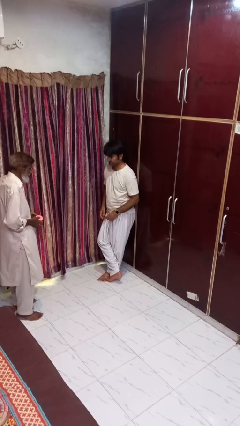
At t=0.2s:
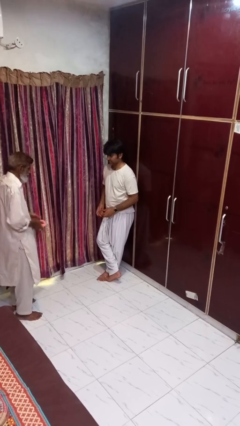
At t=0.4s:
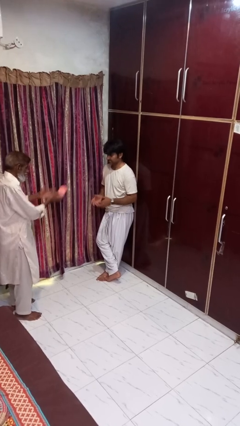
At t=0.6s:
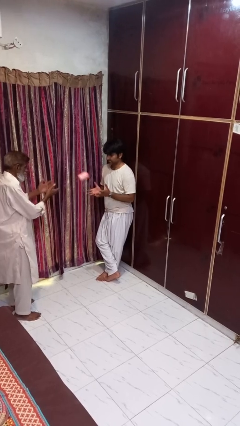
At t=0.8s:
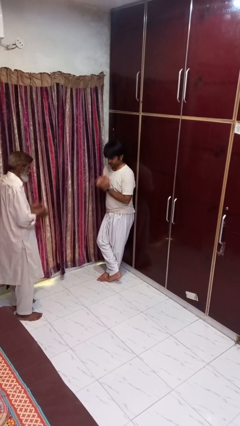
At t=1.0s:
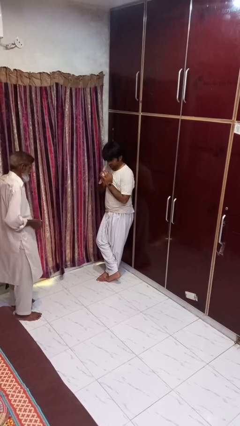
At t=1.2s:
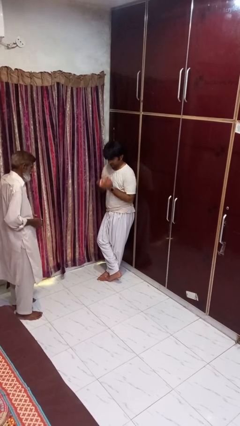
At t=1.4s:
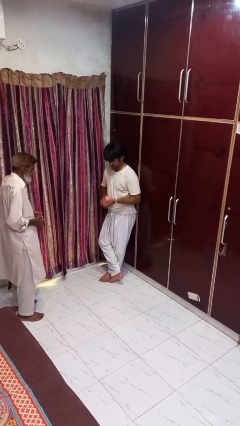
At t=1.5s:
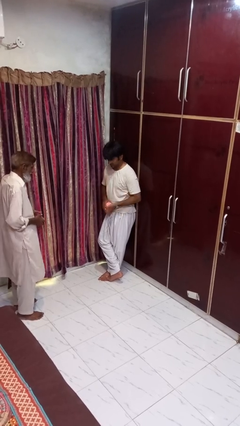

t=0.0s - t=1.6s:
person catches object from person

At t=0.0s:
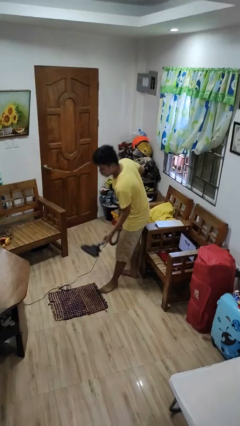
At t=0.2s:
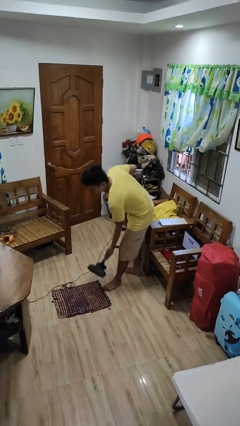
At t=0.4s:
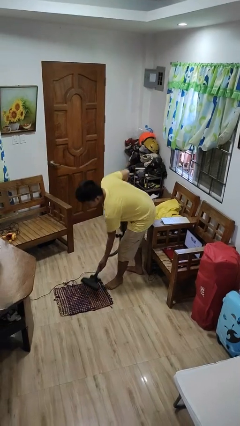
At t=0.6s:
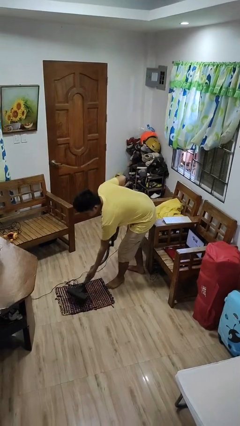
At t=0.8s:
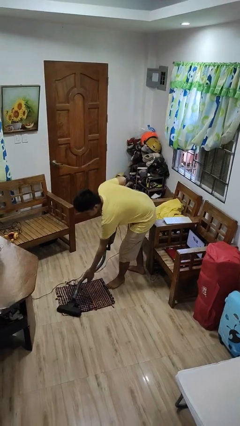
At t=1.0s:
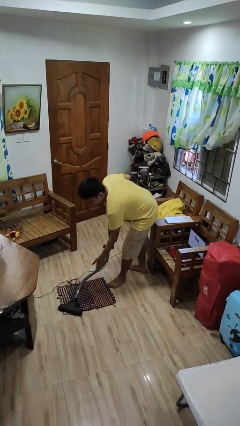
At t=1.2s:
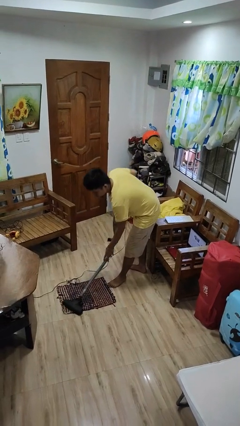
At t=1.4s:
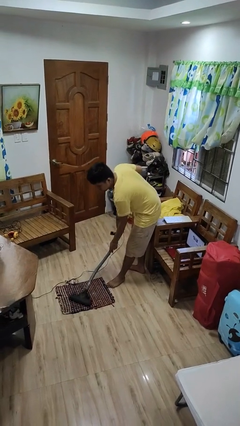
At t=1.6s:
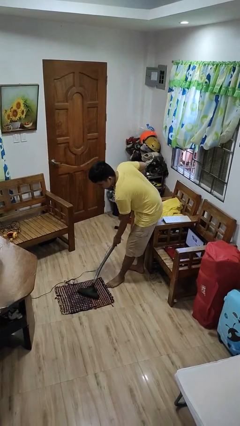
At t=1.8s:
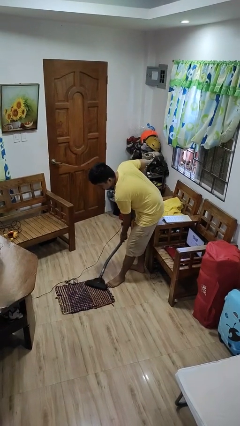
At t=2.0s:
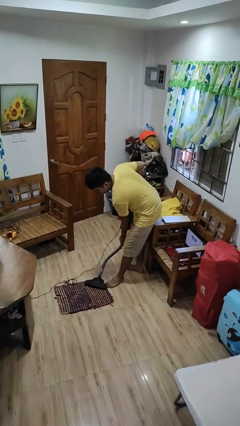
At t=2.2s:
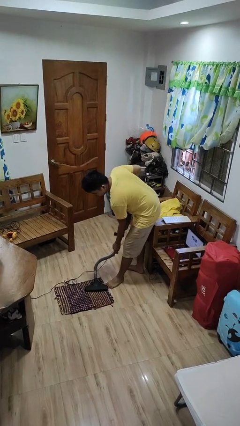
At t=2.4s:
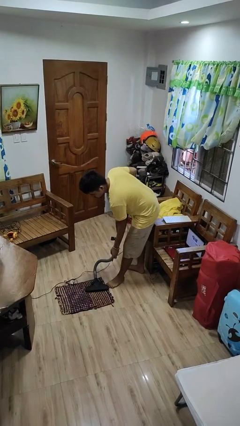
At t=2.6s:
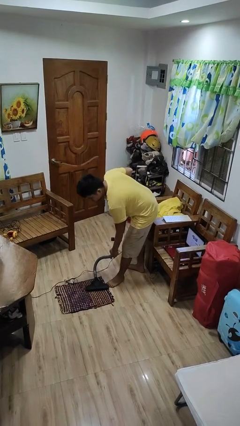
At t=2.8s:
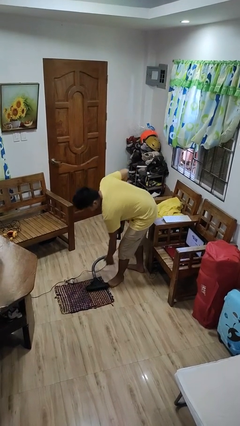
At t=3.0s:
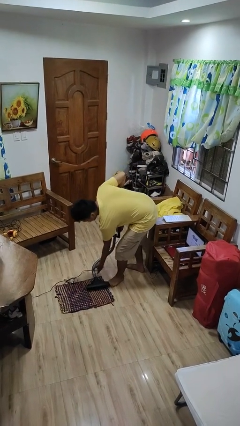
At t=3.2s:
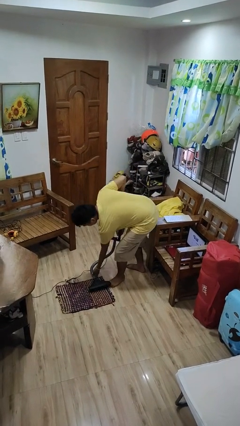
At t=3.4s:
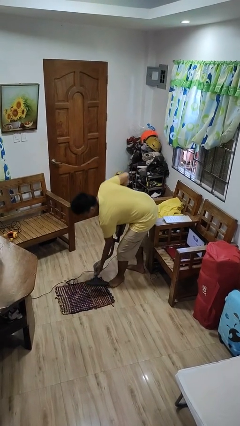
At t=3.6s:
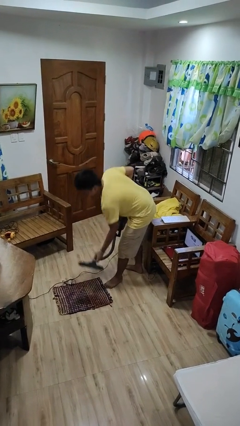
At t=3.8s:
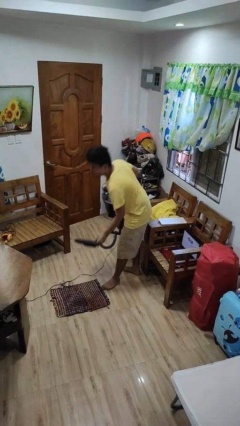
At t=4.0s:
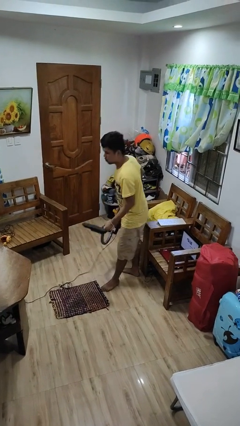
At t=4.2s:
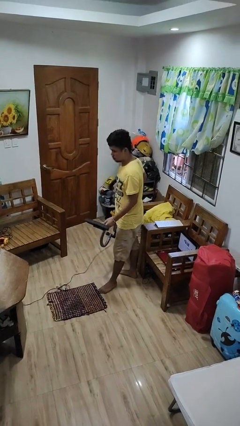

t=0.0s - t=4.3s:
person vacuums carpet

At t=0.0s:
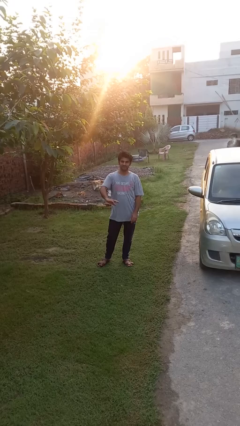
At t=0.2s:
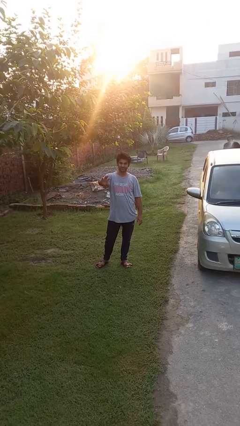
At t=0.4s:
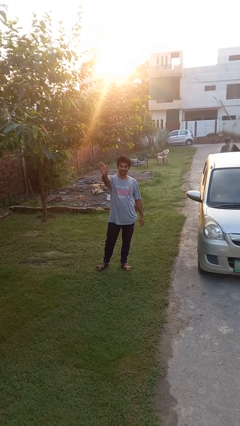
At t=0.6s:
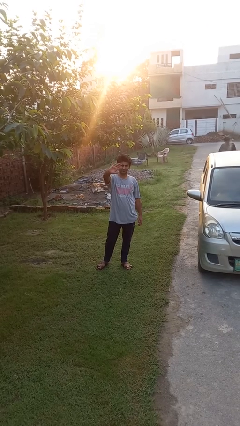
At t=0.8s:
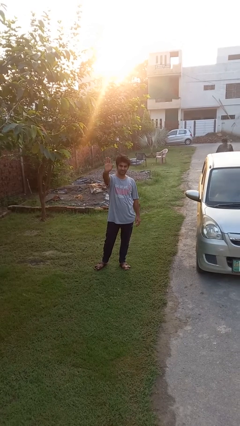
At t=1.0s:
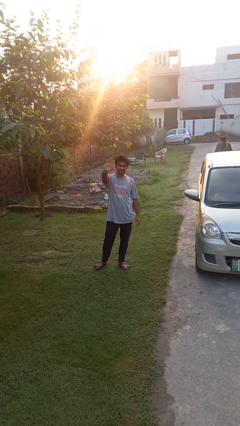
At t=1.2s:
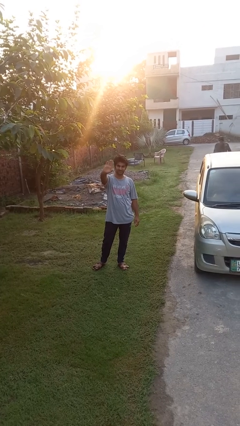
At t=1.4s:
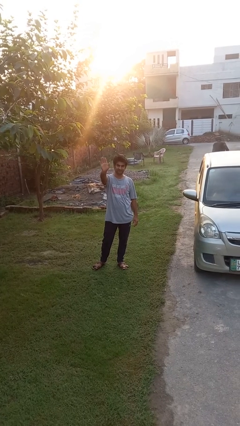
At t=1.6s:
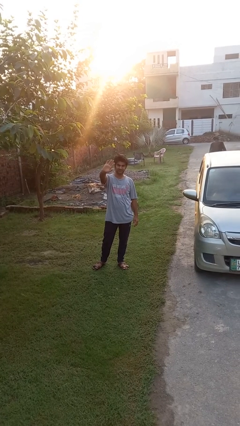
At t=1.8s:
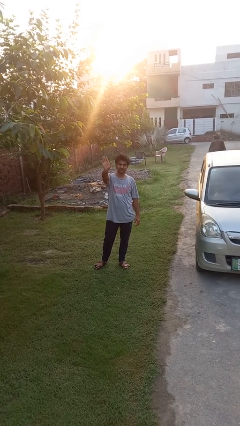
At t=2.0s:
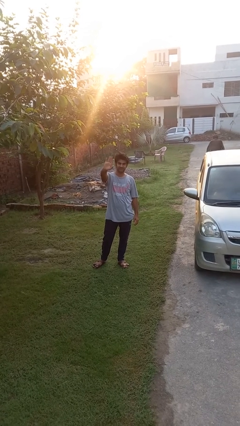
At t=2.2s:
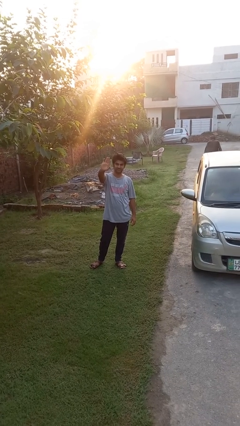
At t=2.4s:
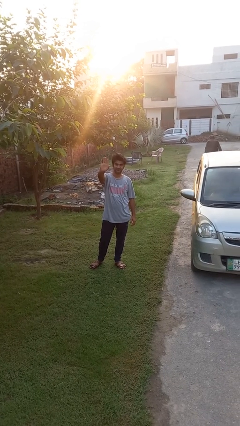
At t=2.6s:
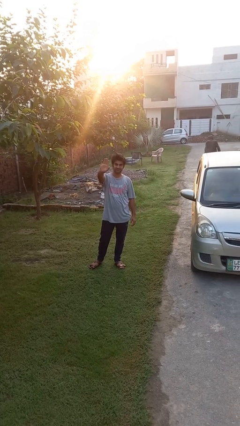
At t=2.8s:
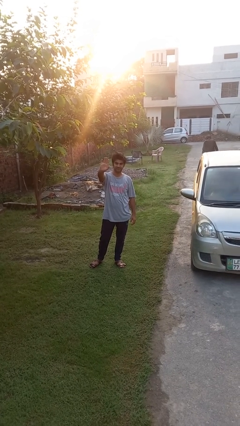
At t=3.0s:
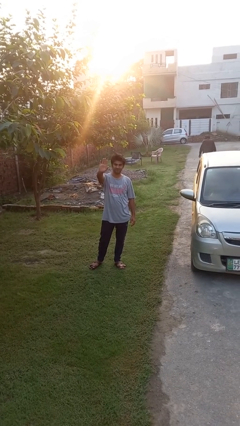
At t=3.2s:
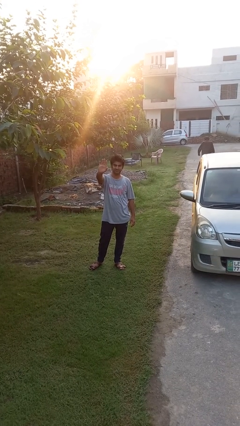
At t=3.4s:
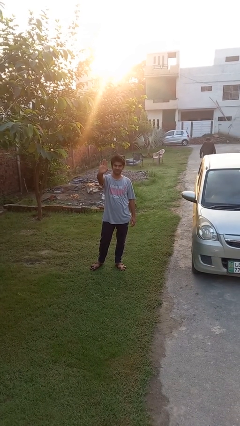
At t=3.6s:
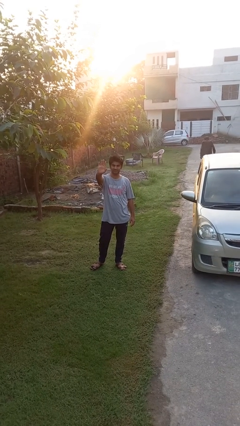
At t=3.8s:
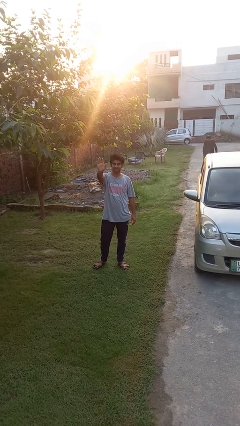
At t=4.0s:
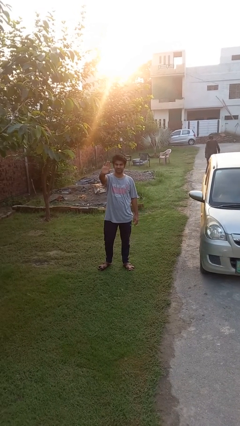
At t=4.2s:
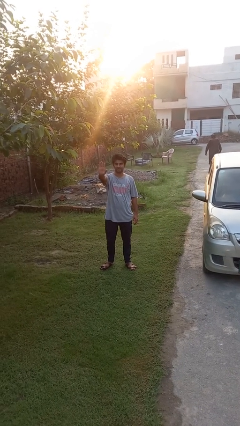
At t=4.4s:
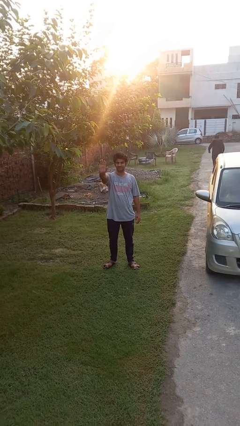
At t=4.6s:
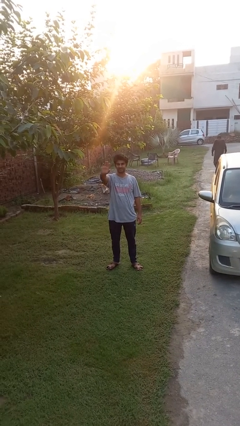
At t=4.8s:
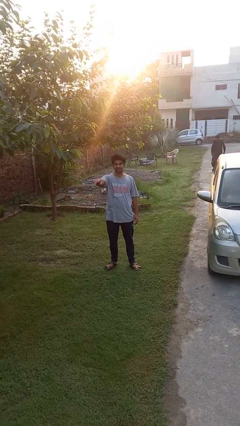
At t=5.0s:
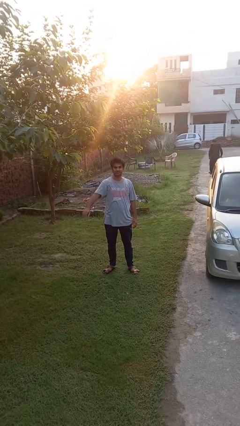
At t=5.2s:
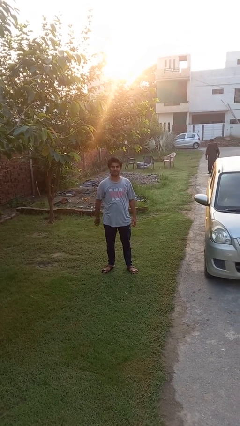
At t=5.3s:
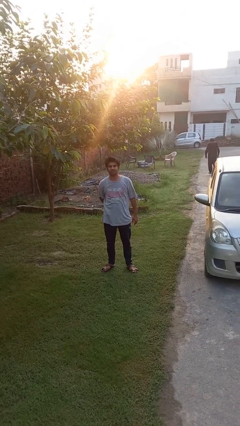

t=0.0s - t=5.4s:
person waves at person

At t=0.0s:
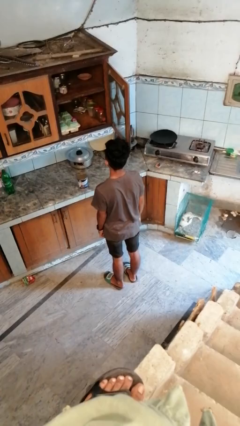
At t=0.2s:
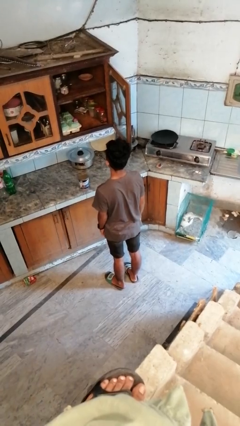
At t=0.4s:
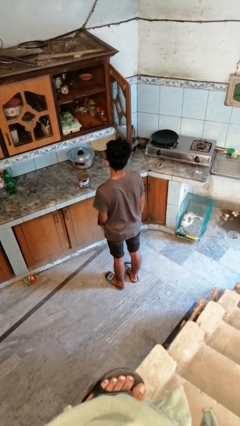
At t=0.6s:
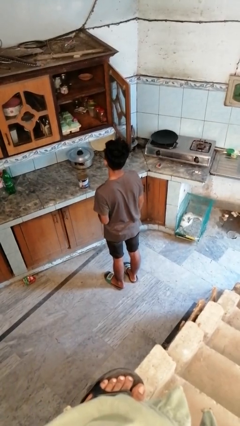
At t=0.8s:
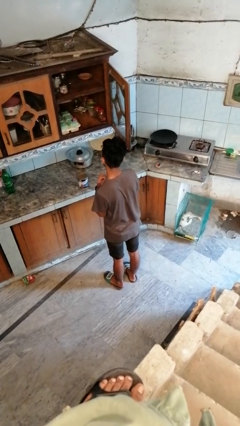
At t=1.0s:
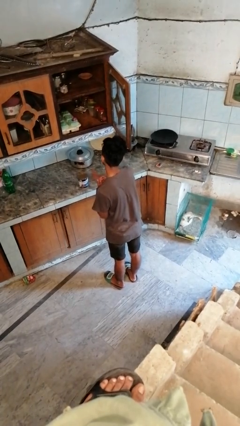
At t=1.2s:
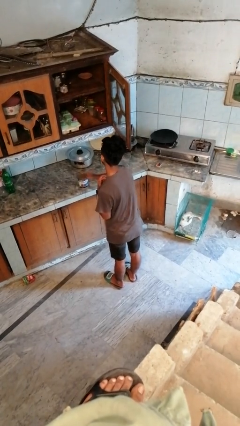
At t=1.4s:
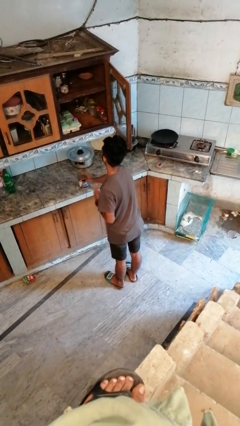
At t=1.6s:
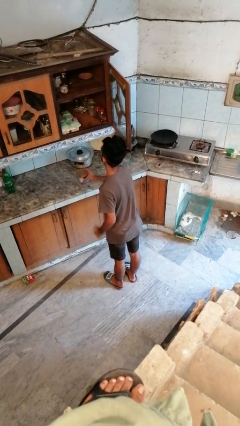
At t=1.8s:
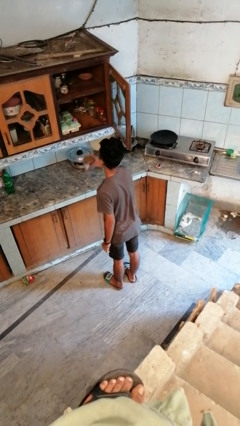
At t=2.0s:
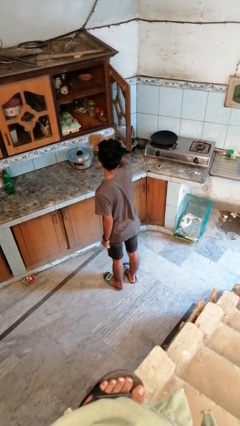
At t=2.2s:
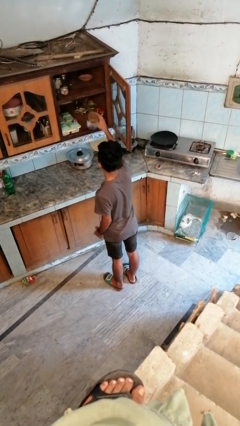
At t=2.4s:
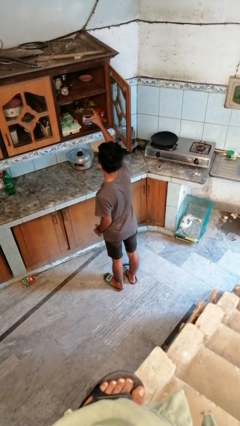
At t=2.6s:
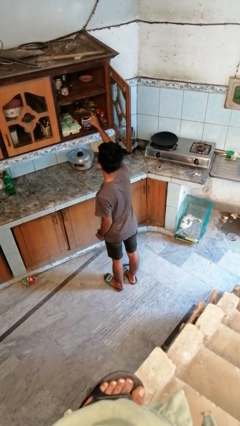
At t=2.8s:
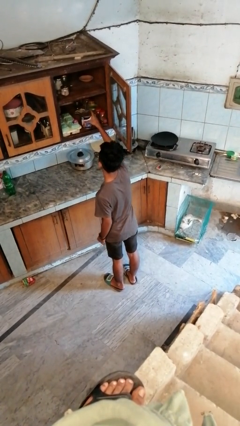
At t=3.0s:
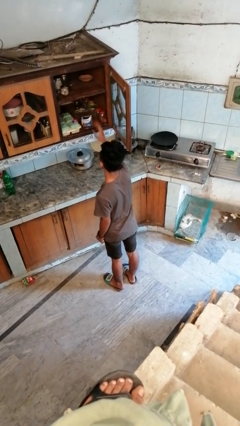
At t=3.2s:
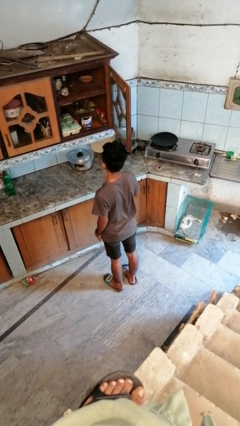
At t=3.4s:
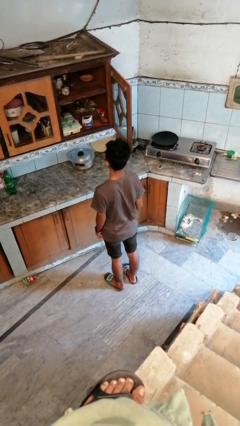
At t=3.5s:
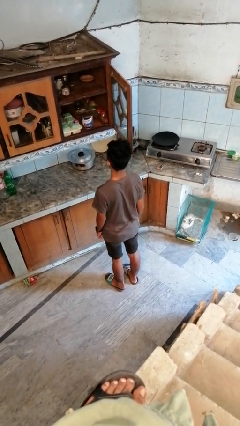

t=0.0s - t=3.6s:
person puts object in cabinet

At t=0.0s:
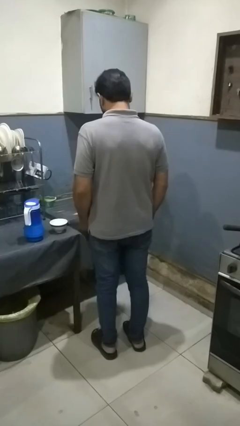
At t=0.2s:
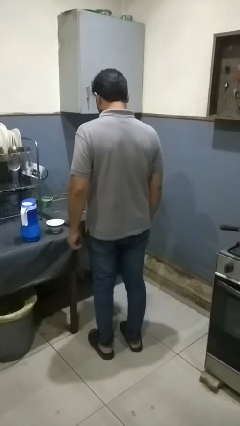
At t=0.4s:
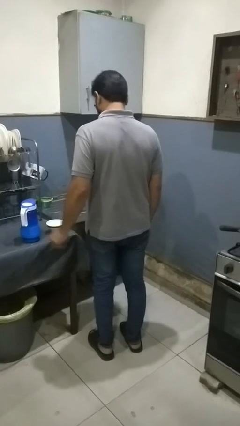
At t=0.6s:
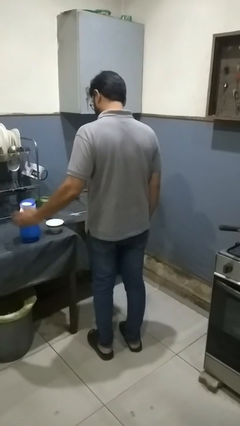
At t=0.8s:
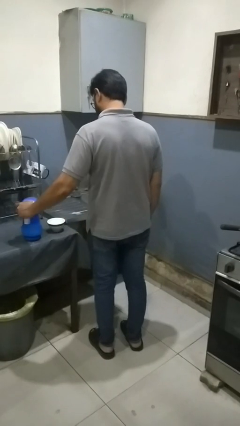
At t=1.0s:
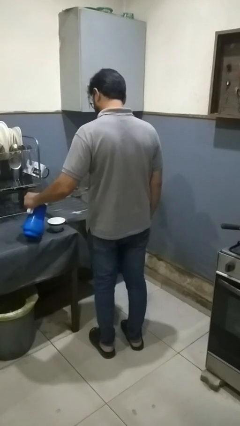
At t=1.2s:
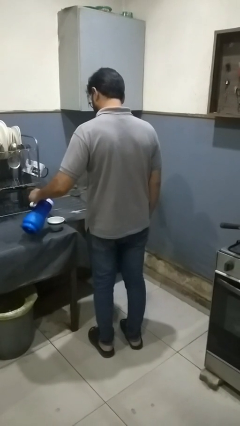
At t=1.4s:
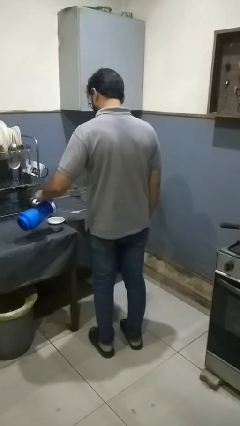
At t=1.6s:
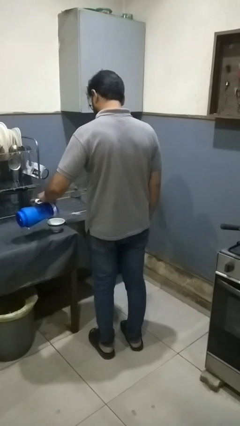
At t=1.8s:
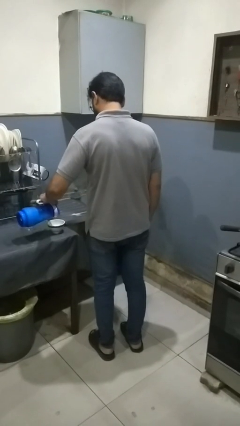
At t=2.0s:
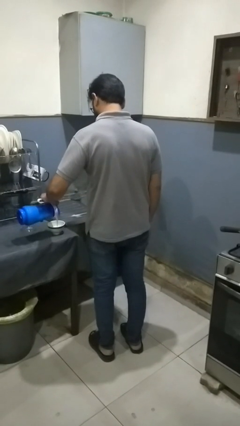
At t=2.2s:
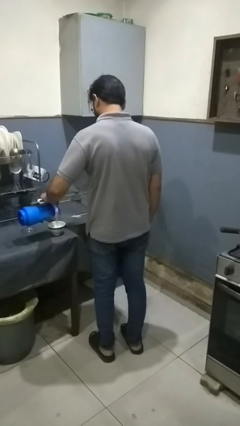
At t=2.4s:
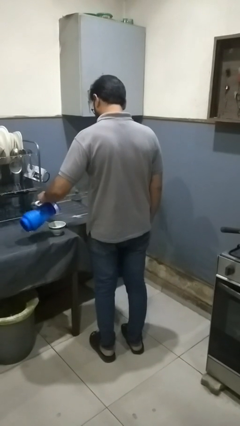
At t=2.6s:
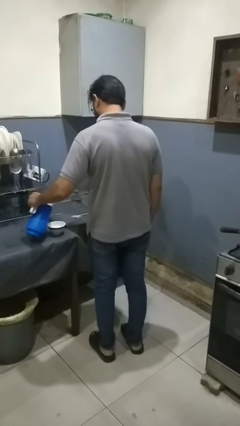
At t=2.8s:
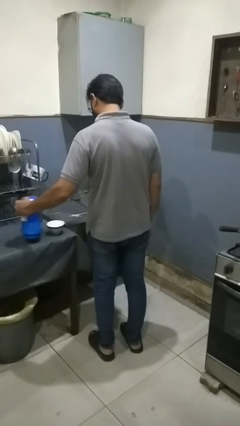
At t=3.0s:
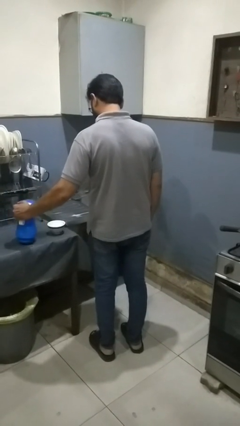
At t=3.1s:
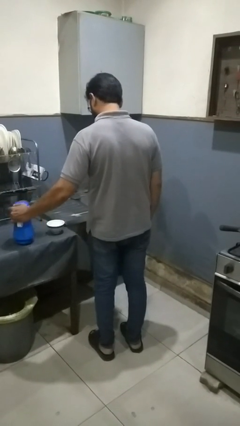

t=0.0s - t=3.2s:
person pours into bowl
